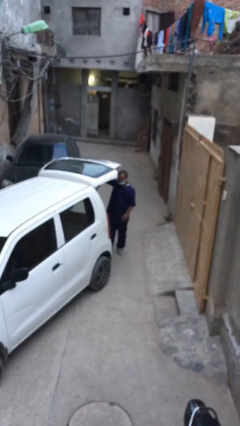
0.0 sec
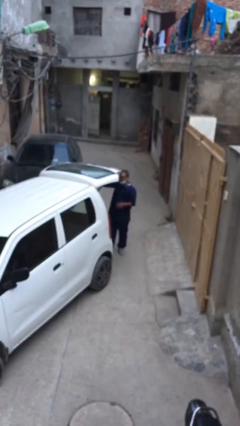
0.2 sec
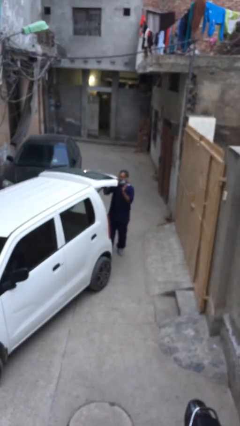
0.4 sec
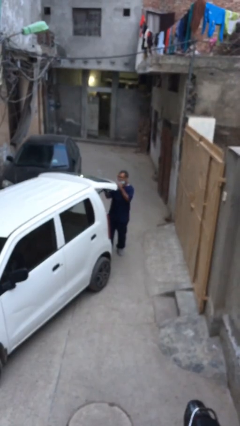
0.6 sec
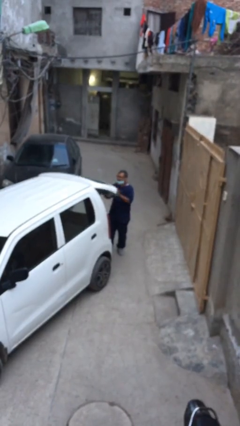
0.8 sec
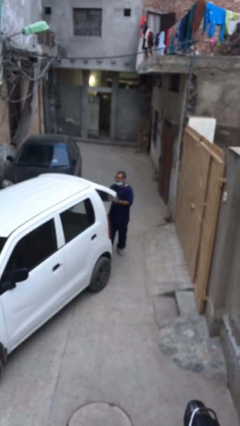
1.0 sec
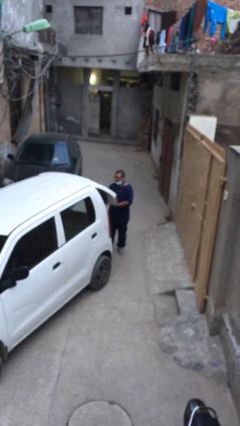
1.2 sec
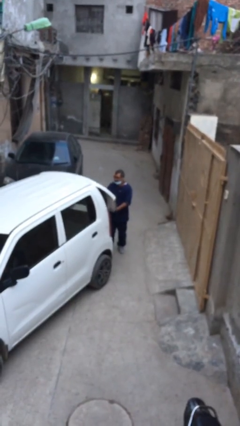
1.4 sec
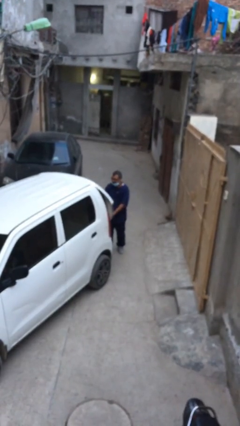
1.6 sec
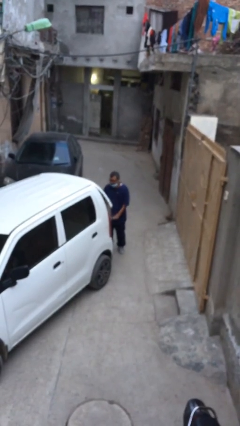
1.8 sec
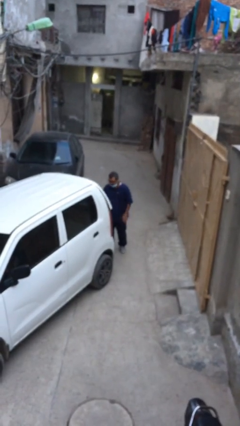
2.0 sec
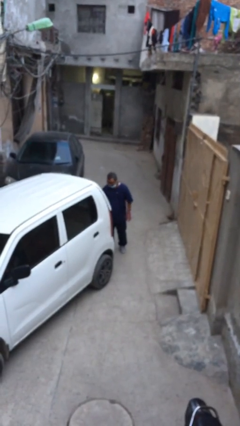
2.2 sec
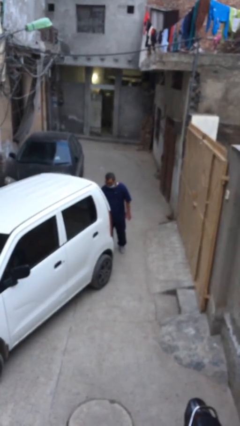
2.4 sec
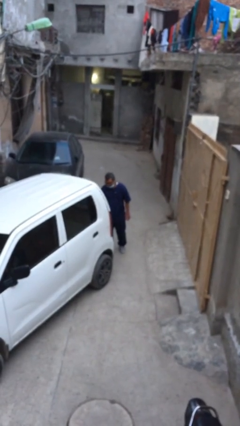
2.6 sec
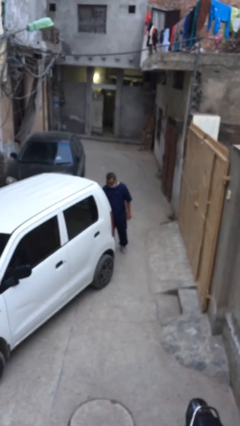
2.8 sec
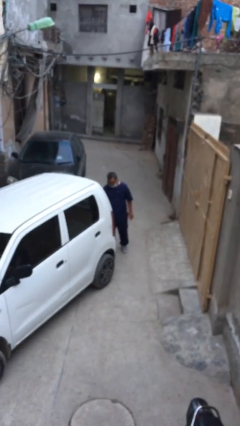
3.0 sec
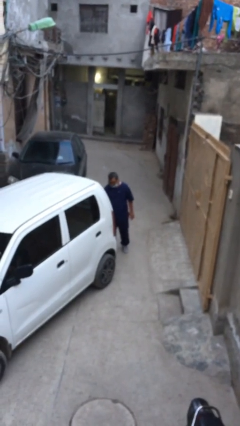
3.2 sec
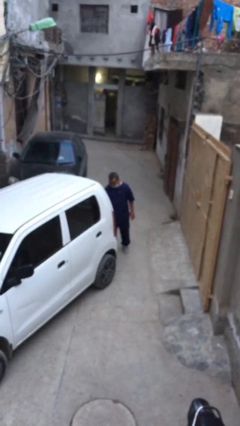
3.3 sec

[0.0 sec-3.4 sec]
person closes car trunk

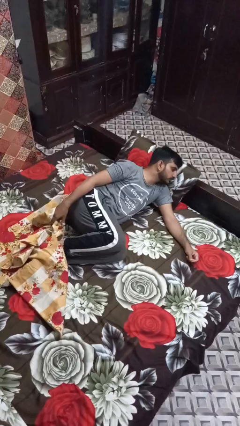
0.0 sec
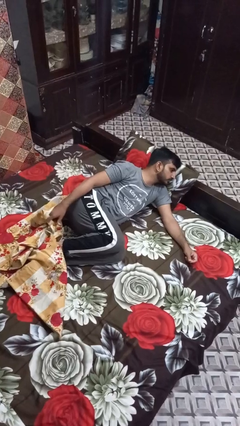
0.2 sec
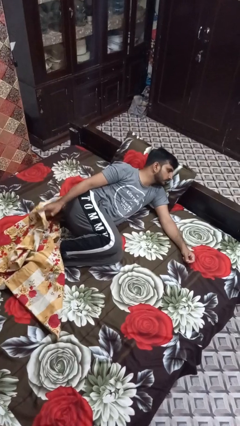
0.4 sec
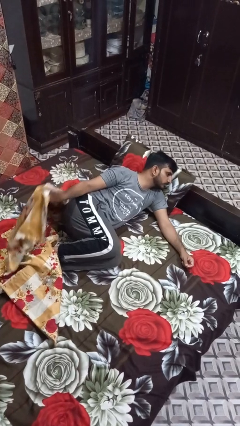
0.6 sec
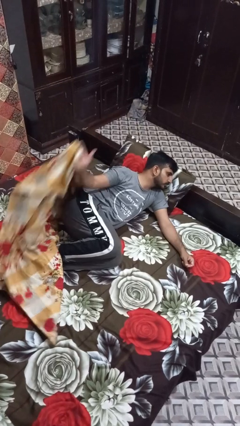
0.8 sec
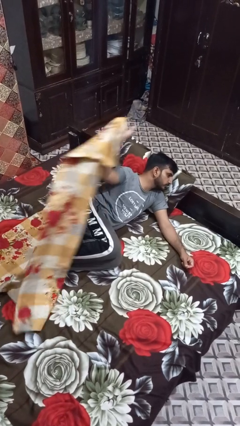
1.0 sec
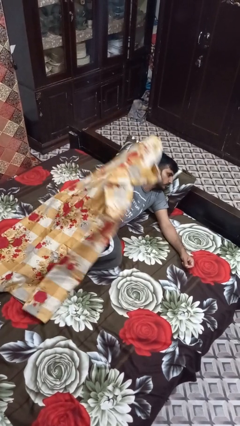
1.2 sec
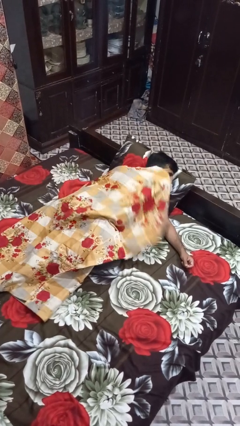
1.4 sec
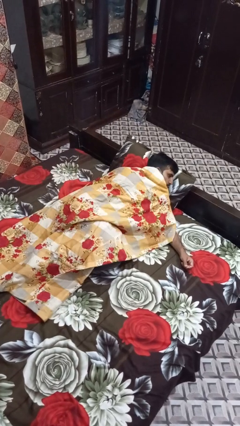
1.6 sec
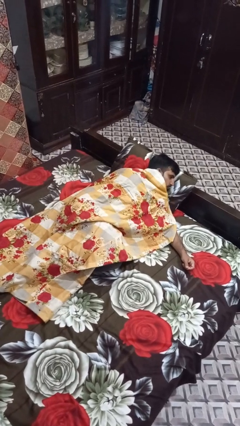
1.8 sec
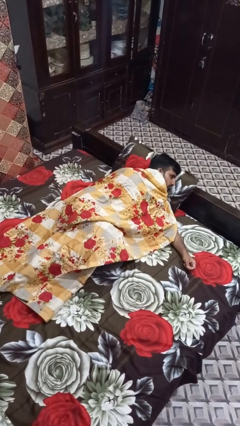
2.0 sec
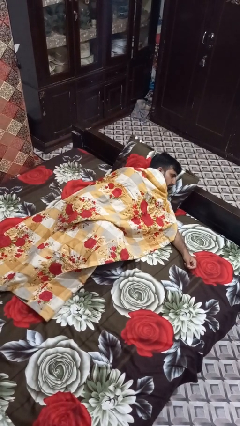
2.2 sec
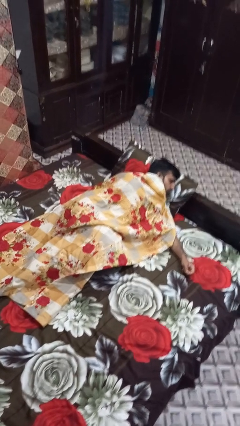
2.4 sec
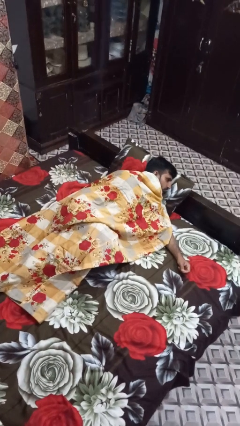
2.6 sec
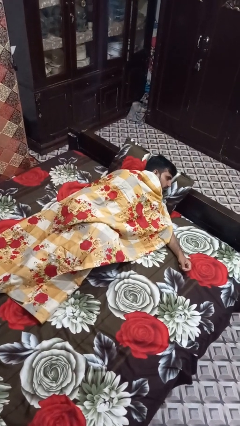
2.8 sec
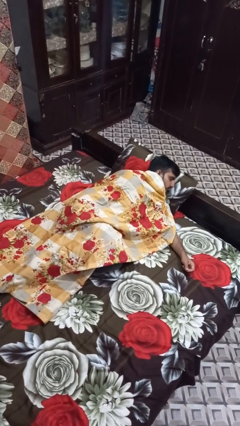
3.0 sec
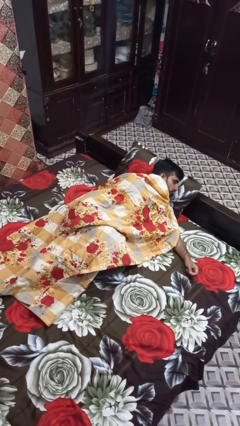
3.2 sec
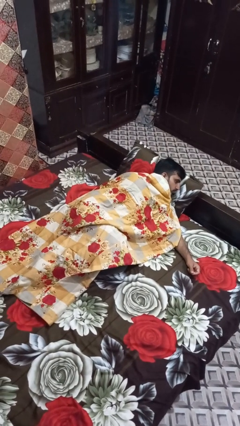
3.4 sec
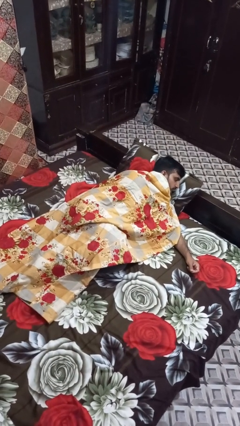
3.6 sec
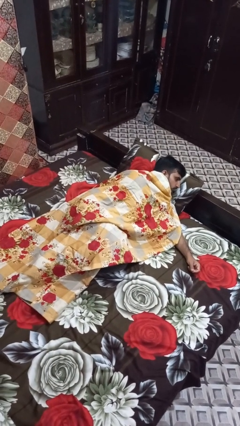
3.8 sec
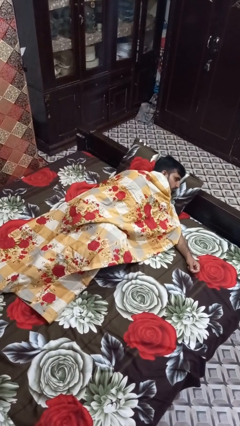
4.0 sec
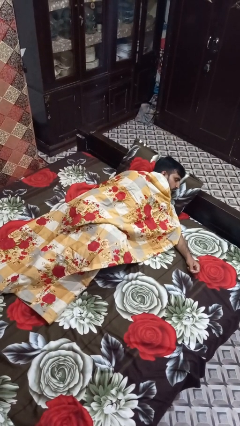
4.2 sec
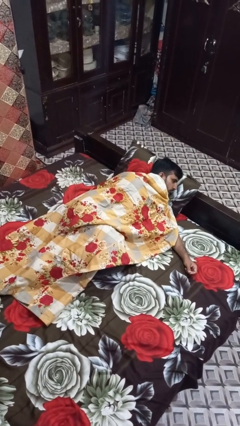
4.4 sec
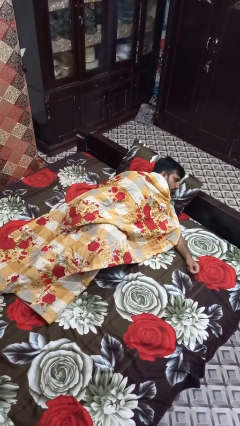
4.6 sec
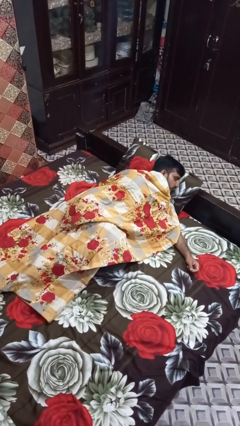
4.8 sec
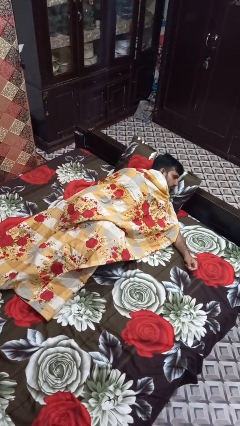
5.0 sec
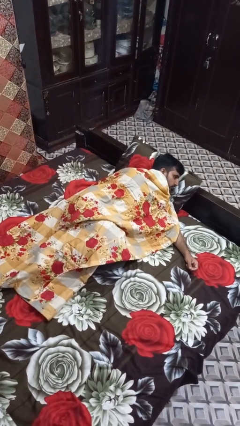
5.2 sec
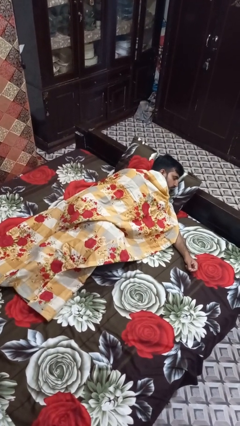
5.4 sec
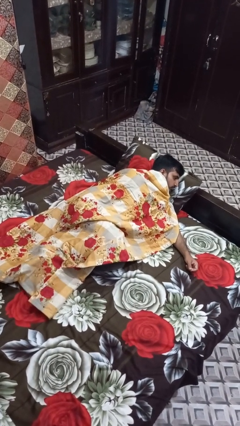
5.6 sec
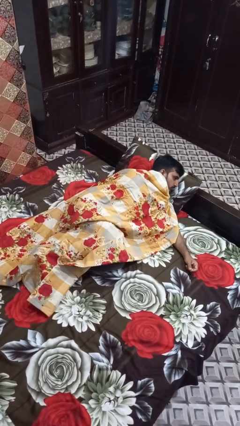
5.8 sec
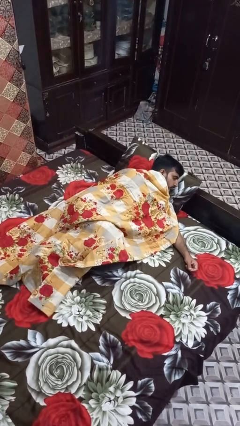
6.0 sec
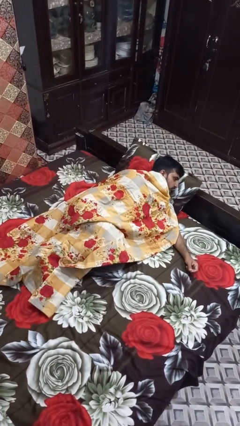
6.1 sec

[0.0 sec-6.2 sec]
person covers with bedsheets

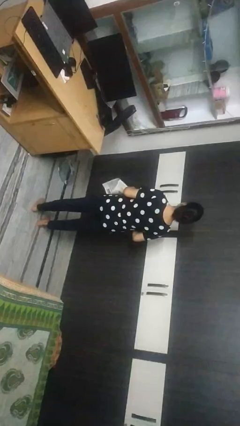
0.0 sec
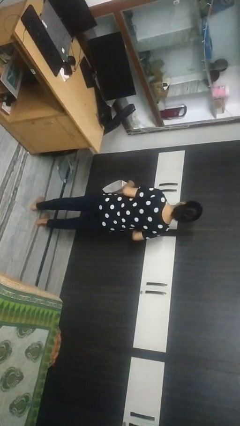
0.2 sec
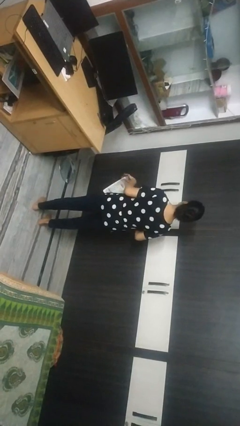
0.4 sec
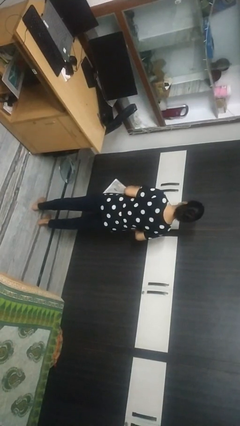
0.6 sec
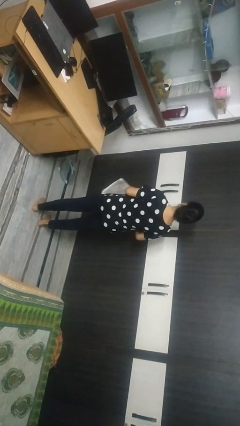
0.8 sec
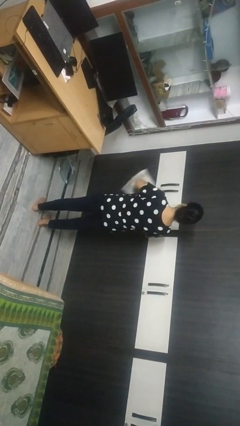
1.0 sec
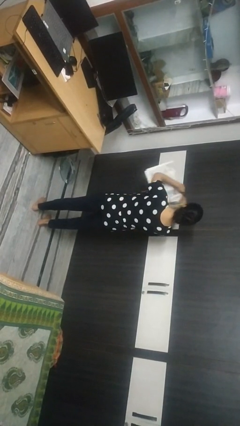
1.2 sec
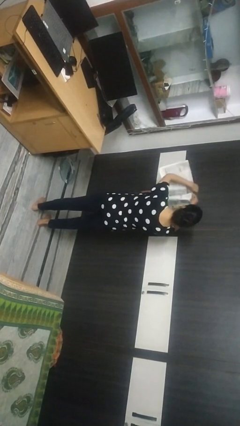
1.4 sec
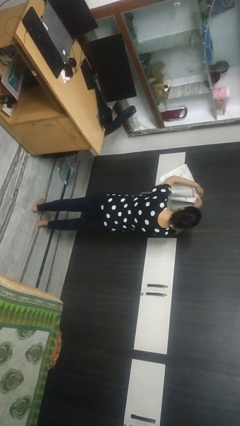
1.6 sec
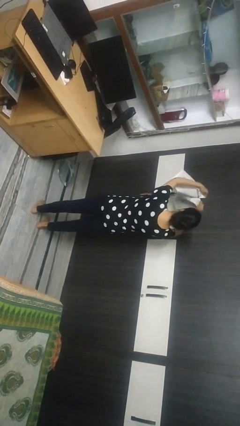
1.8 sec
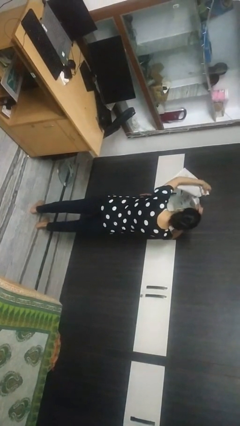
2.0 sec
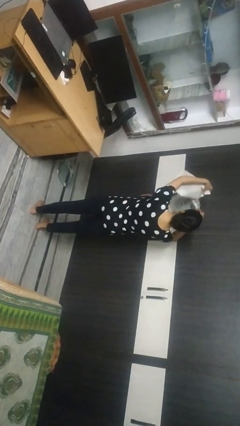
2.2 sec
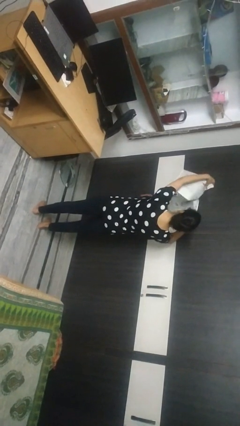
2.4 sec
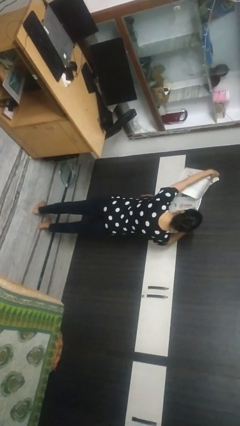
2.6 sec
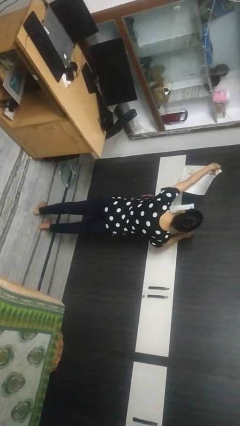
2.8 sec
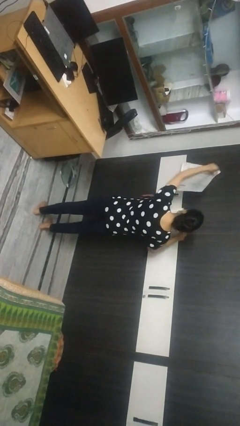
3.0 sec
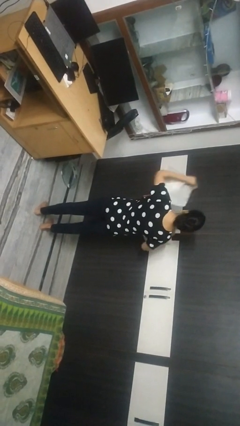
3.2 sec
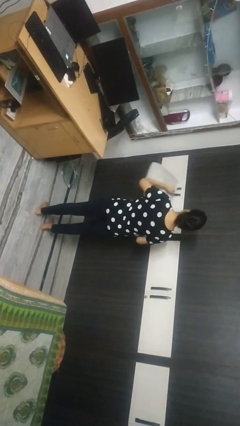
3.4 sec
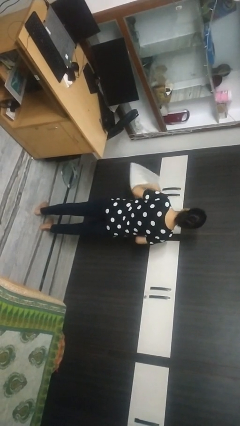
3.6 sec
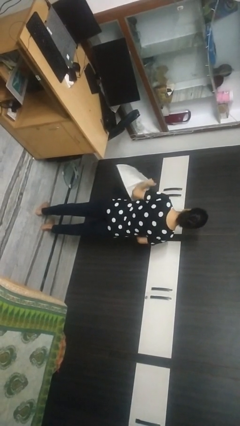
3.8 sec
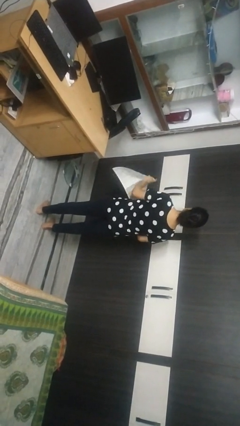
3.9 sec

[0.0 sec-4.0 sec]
person tears paper

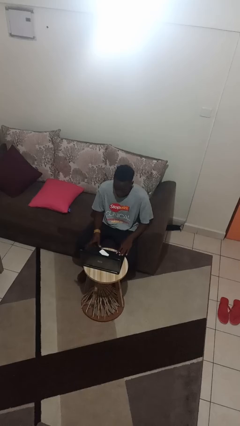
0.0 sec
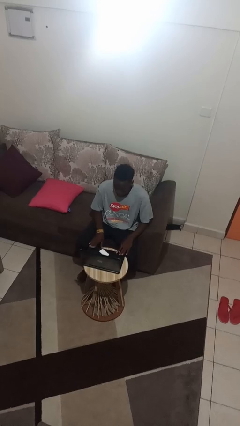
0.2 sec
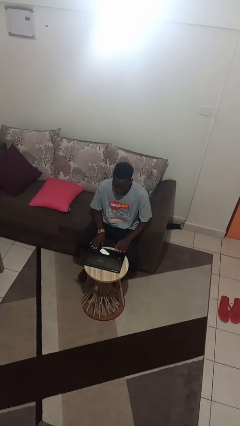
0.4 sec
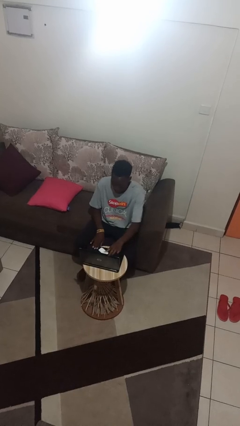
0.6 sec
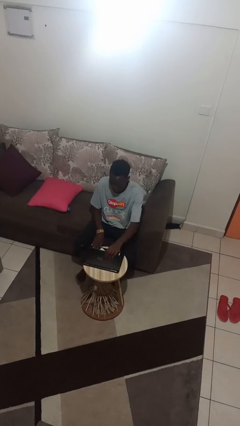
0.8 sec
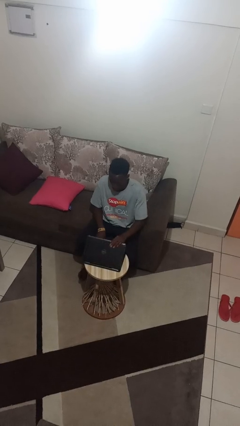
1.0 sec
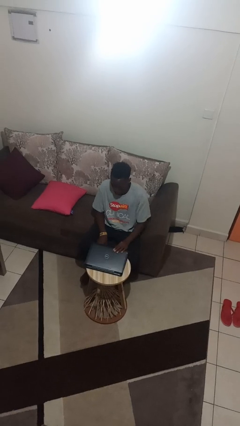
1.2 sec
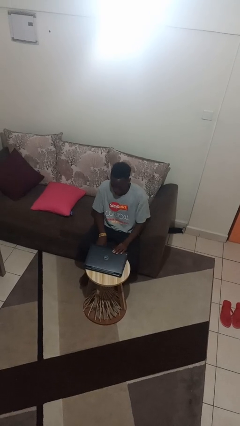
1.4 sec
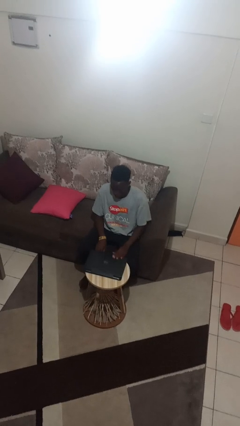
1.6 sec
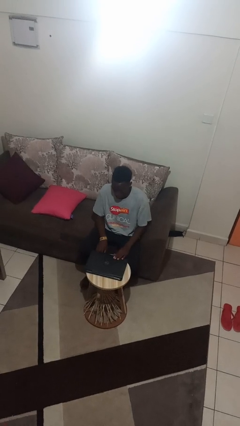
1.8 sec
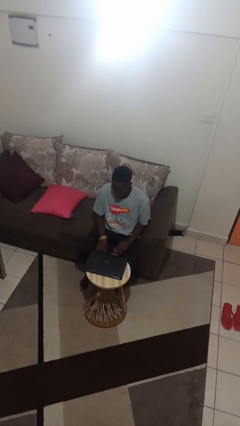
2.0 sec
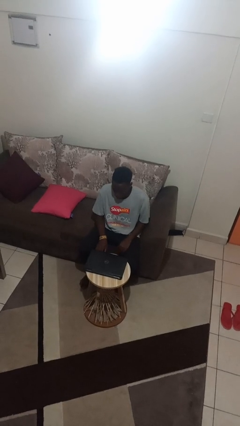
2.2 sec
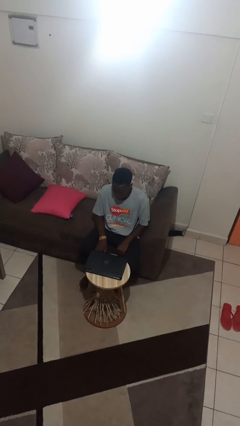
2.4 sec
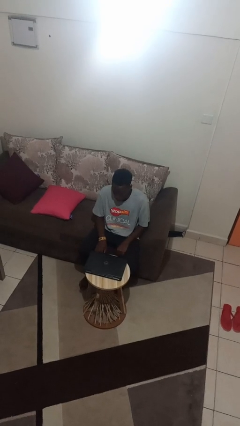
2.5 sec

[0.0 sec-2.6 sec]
person closes laptop

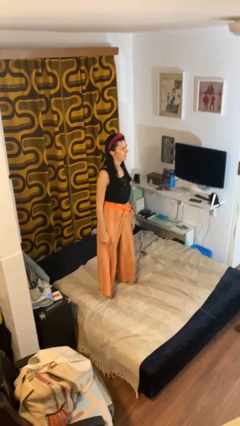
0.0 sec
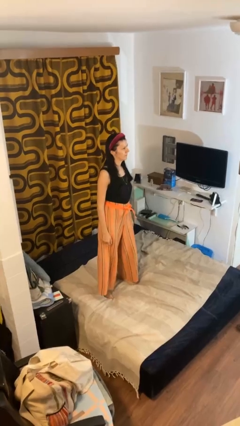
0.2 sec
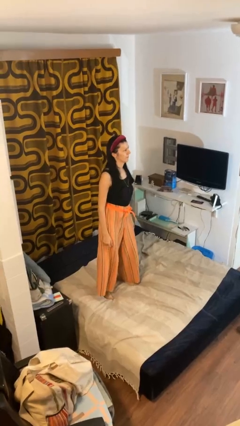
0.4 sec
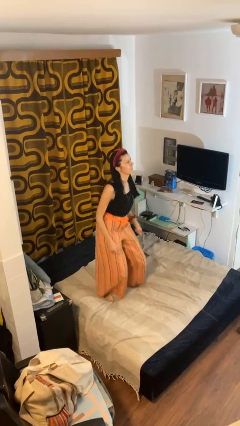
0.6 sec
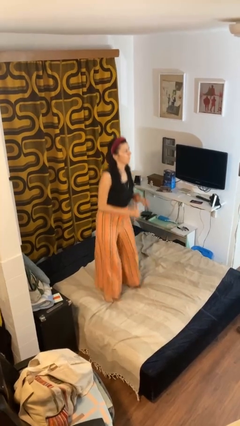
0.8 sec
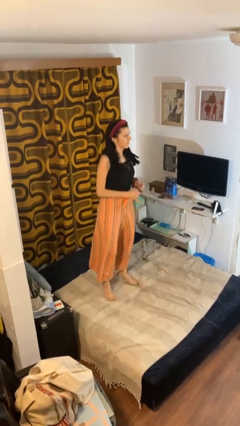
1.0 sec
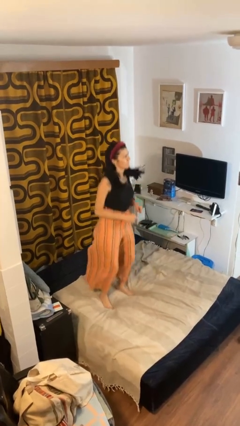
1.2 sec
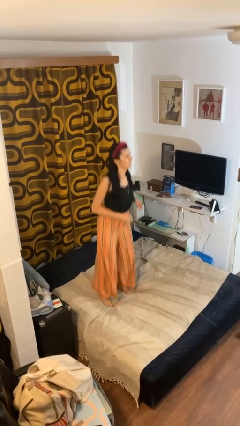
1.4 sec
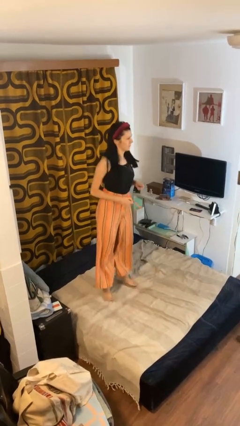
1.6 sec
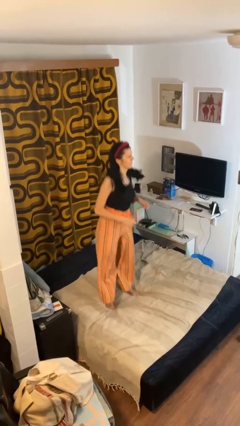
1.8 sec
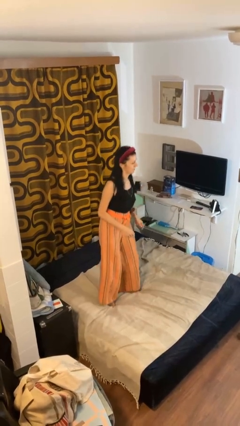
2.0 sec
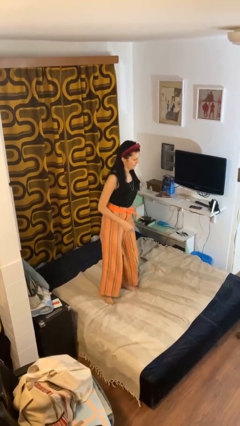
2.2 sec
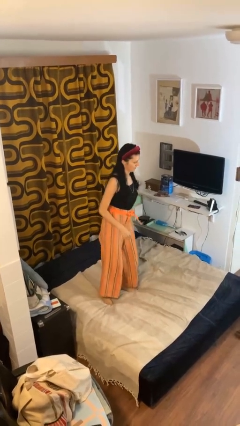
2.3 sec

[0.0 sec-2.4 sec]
person jumps on bed
